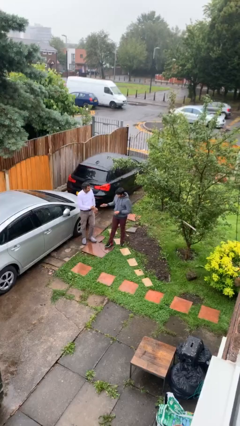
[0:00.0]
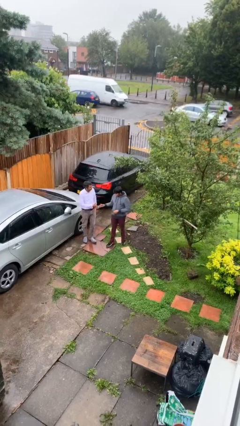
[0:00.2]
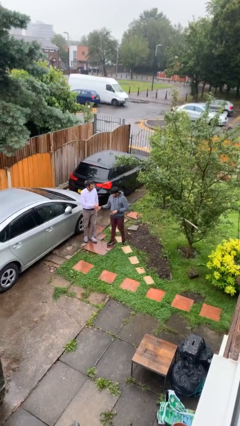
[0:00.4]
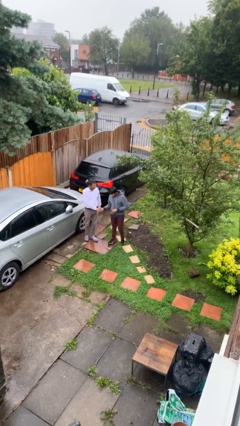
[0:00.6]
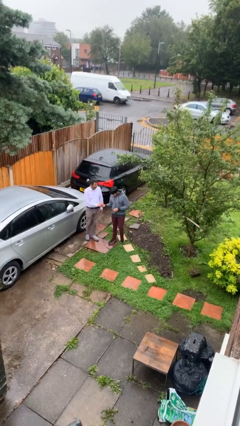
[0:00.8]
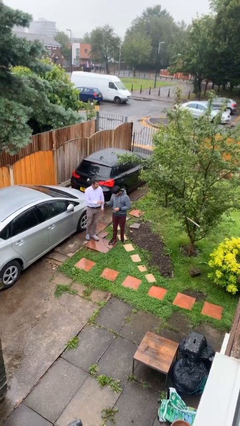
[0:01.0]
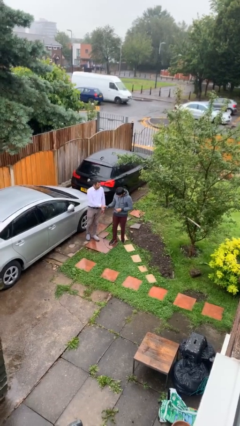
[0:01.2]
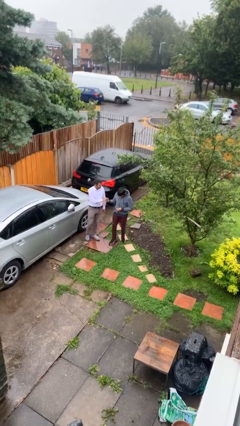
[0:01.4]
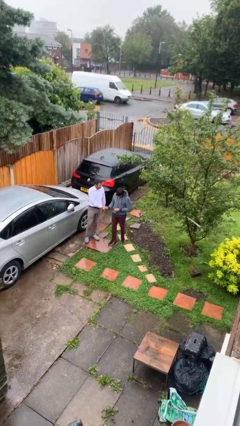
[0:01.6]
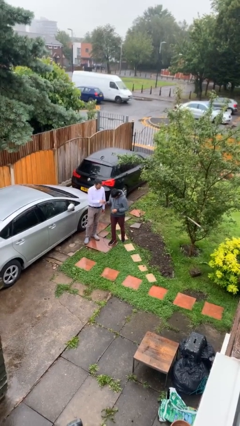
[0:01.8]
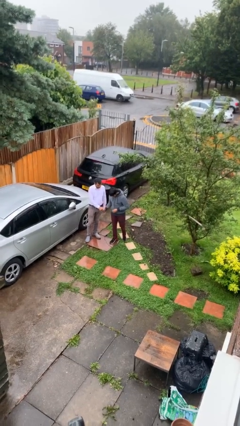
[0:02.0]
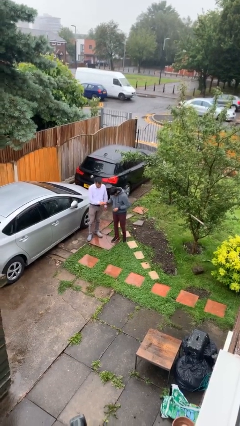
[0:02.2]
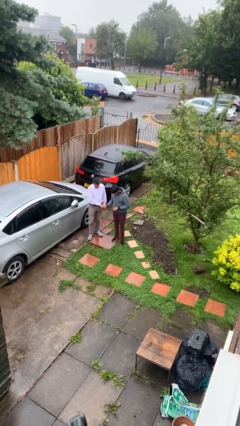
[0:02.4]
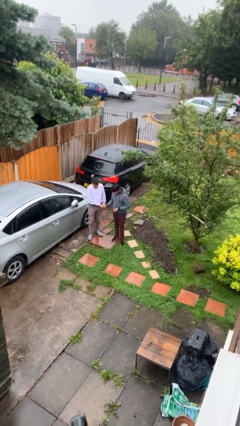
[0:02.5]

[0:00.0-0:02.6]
person shakes hand

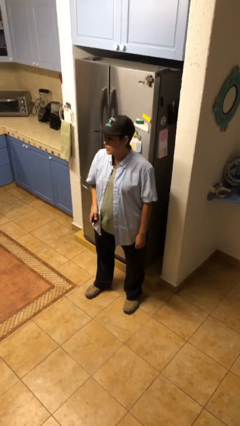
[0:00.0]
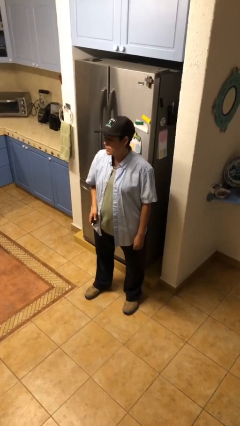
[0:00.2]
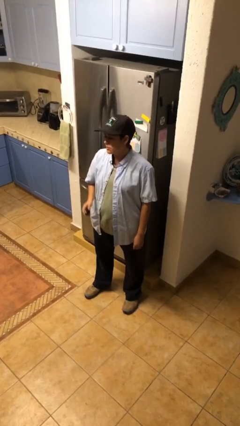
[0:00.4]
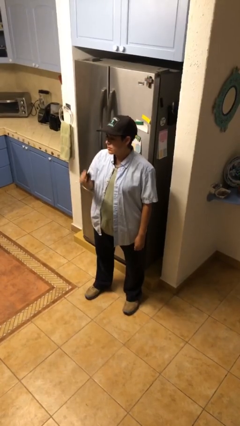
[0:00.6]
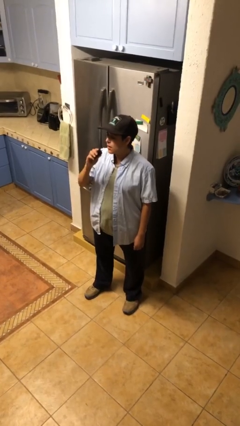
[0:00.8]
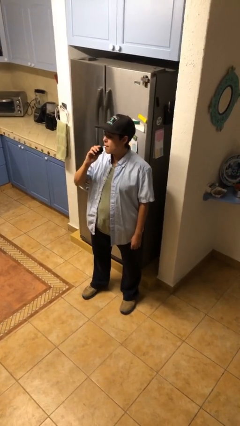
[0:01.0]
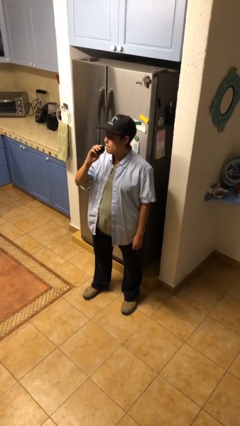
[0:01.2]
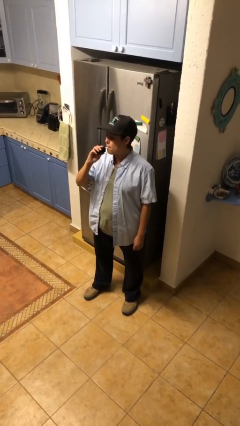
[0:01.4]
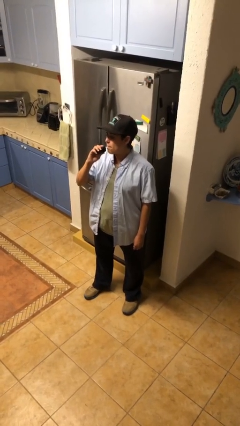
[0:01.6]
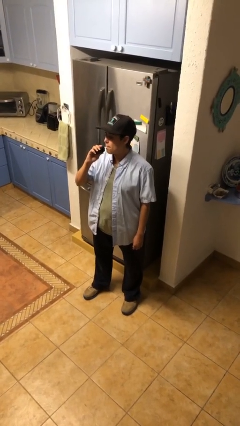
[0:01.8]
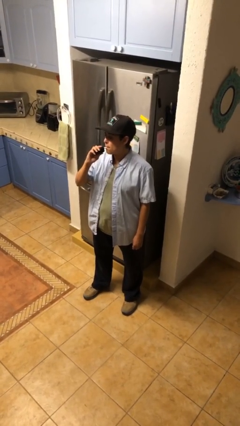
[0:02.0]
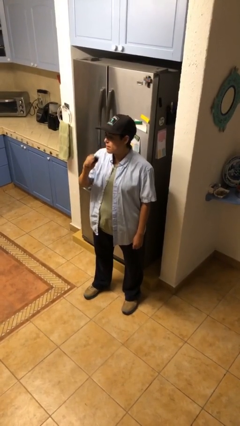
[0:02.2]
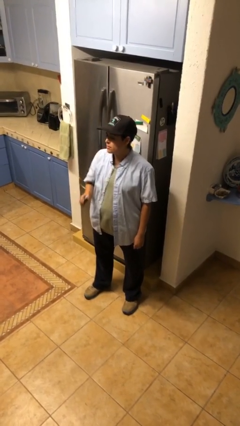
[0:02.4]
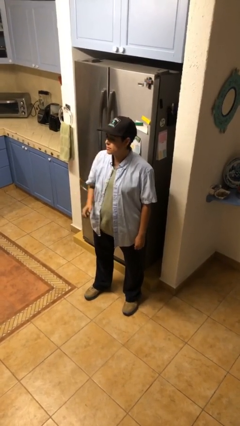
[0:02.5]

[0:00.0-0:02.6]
person vapes

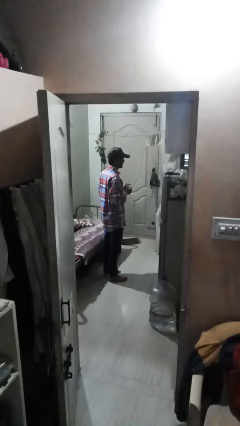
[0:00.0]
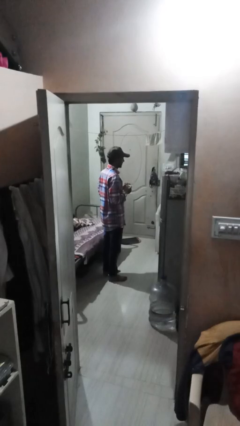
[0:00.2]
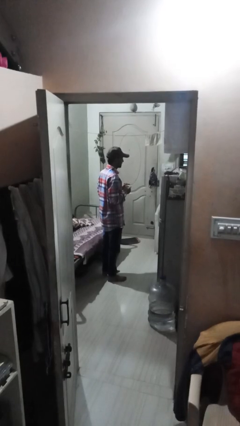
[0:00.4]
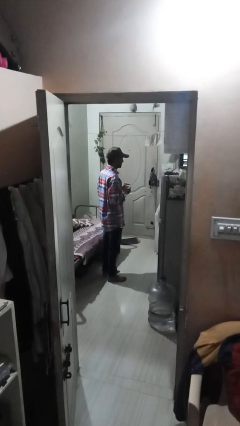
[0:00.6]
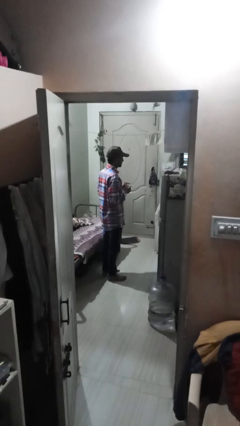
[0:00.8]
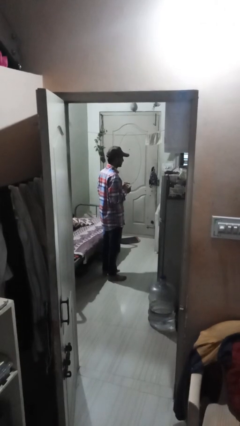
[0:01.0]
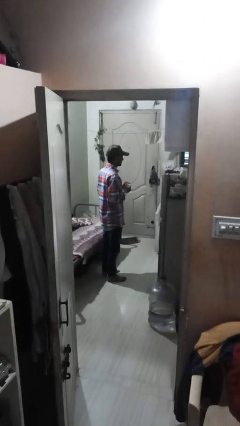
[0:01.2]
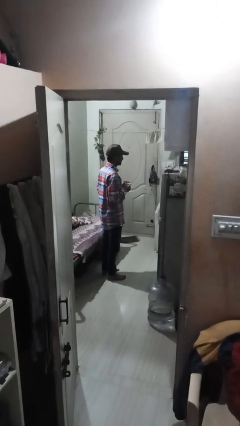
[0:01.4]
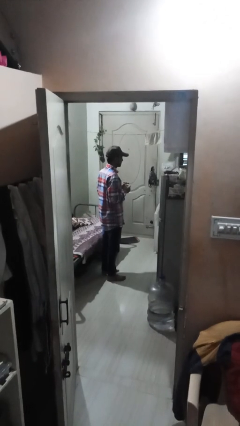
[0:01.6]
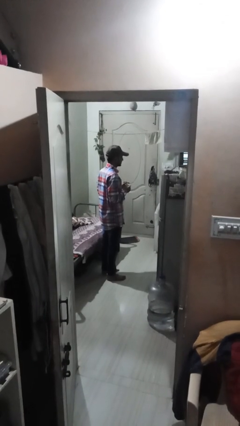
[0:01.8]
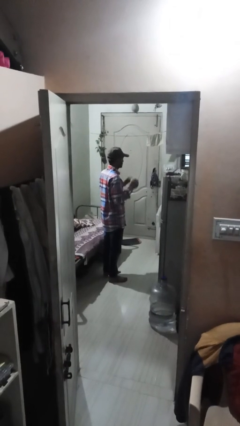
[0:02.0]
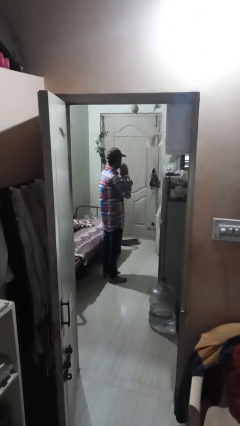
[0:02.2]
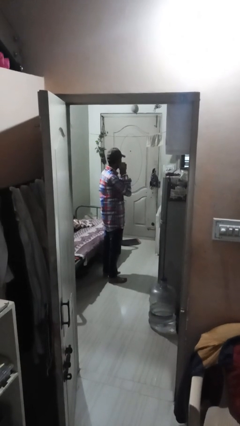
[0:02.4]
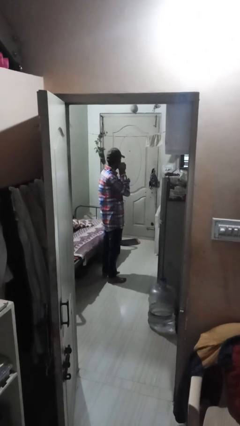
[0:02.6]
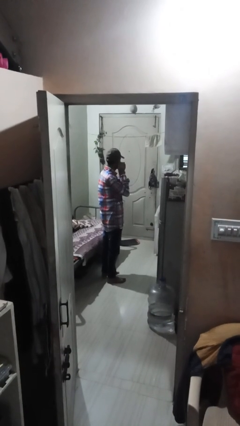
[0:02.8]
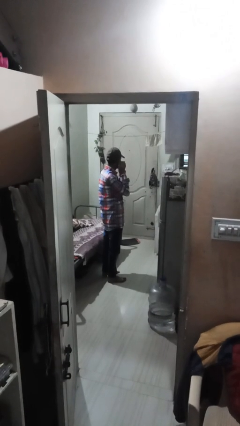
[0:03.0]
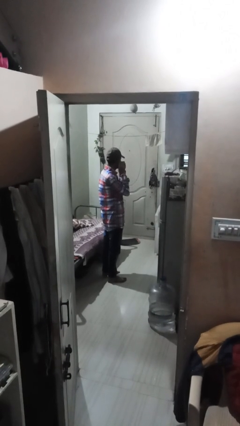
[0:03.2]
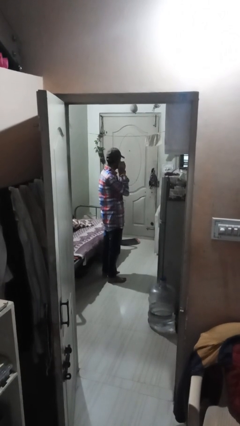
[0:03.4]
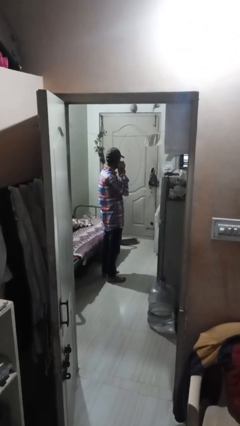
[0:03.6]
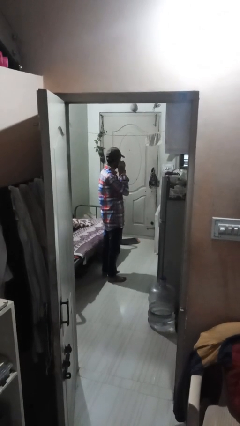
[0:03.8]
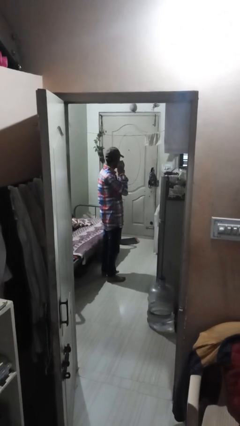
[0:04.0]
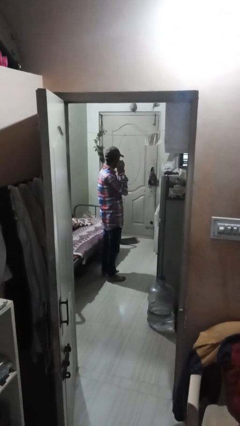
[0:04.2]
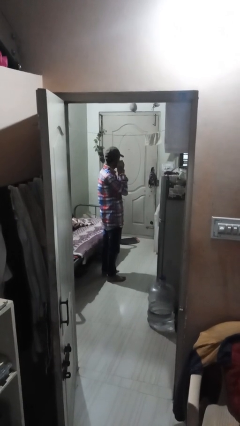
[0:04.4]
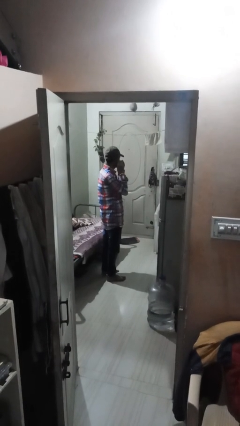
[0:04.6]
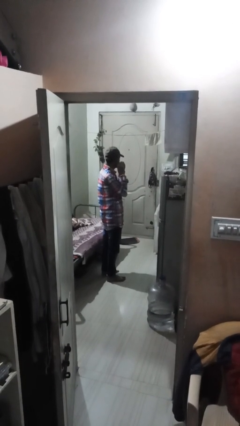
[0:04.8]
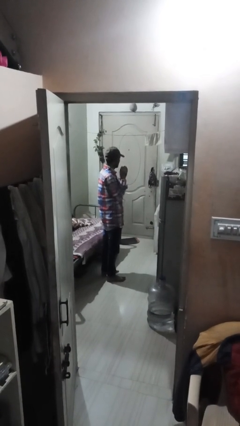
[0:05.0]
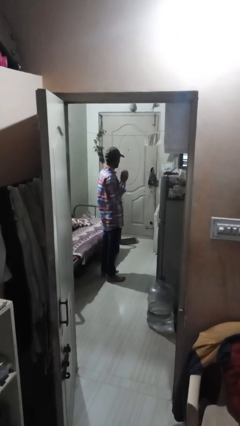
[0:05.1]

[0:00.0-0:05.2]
person puts on earrings

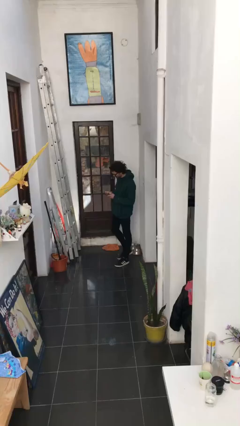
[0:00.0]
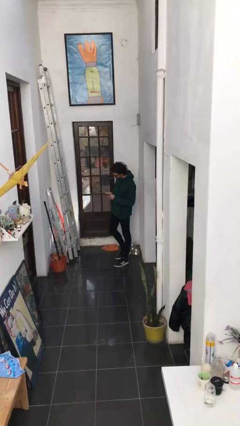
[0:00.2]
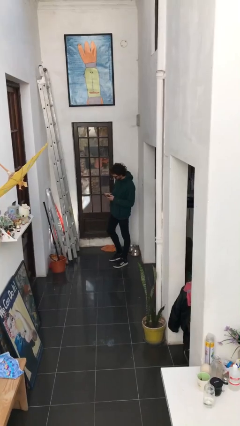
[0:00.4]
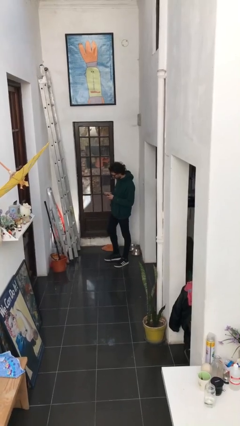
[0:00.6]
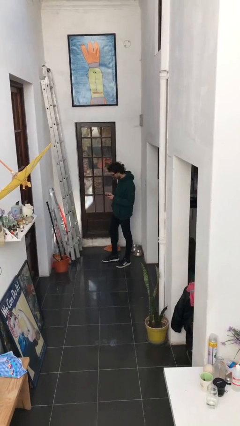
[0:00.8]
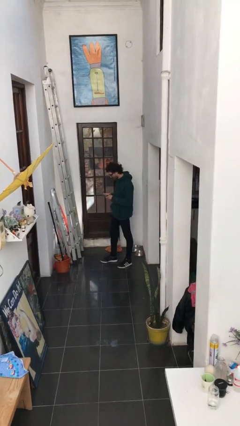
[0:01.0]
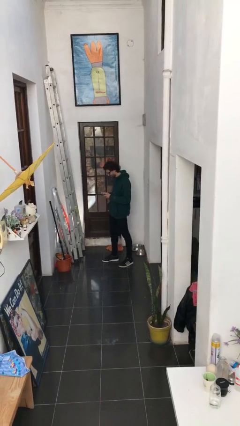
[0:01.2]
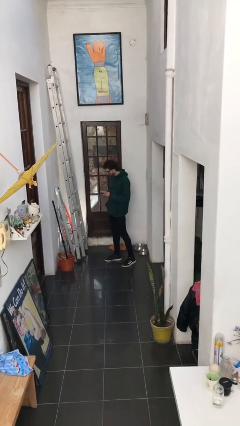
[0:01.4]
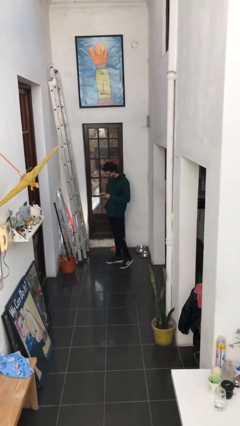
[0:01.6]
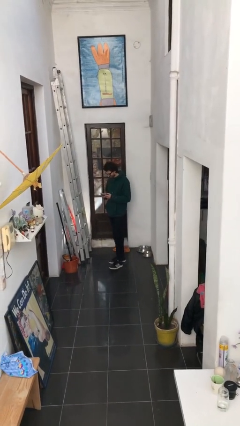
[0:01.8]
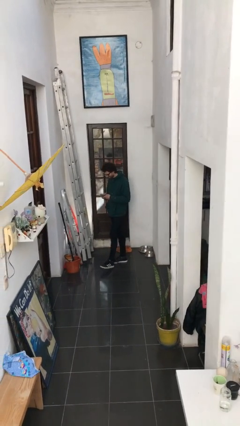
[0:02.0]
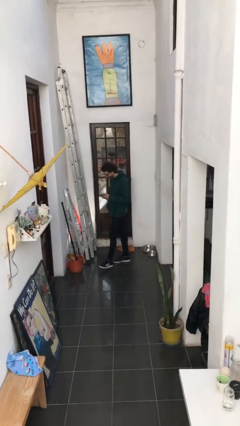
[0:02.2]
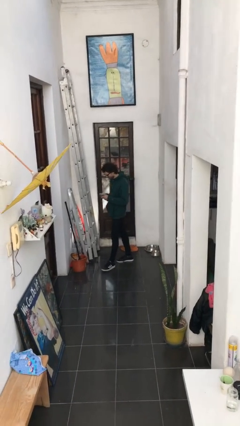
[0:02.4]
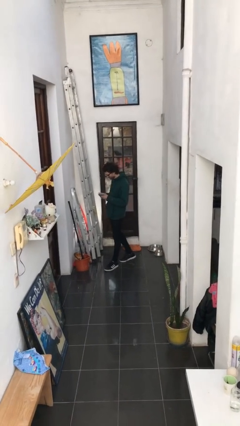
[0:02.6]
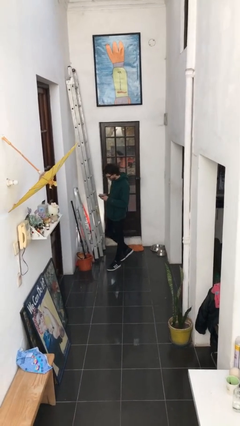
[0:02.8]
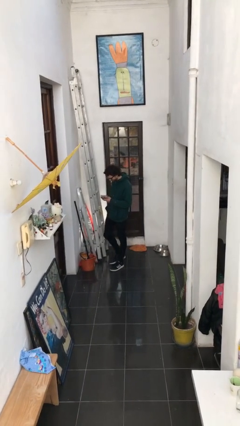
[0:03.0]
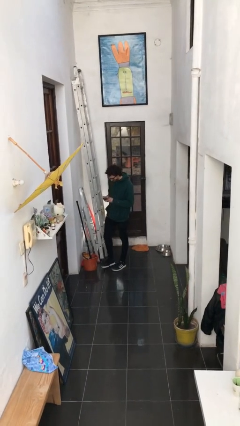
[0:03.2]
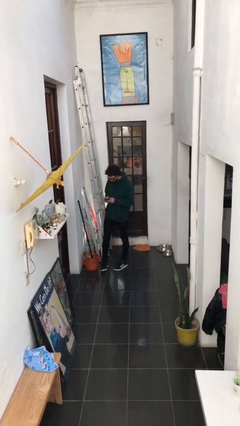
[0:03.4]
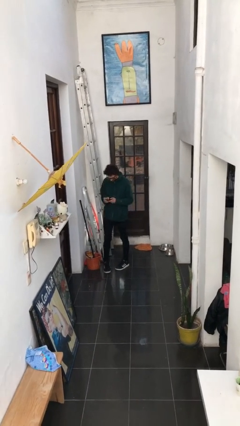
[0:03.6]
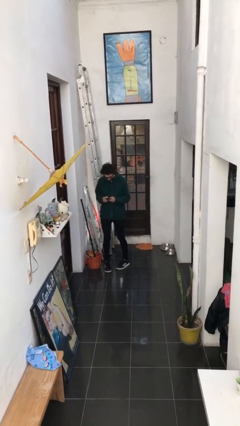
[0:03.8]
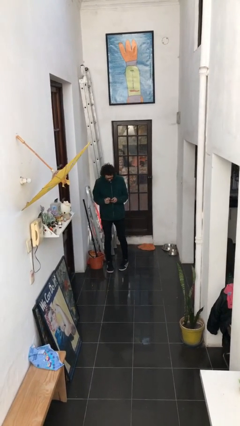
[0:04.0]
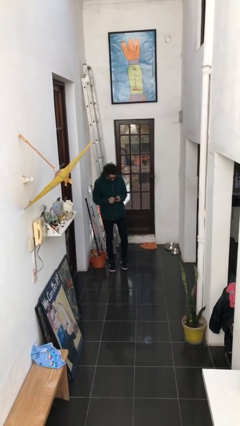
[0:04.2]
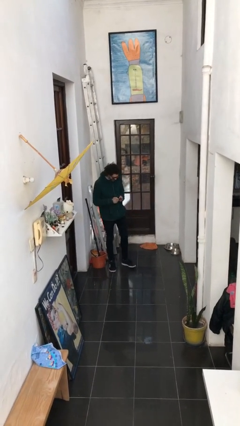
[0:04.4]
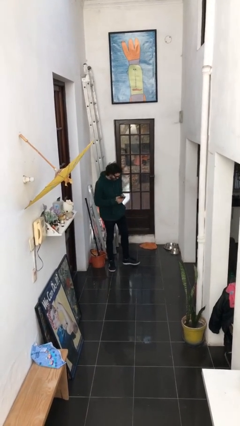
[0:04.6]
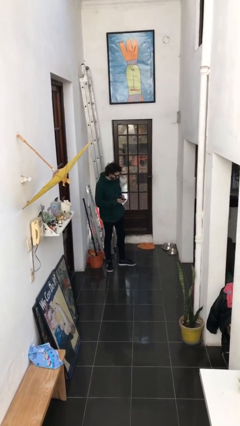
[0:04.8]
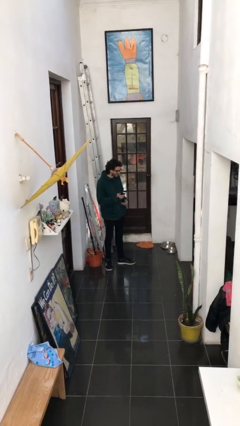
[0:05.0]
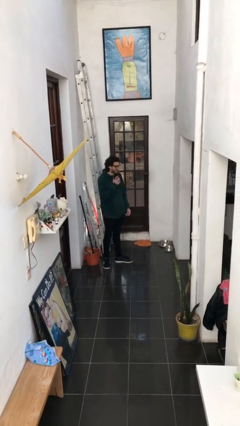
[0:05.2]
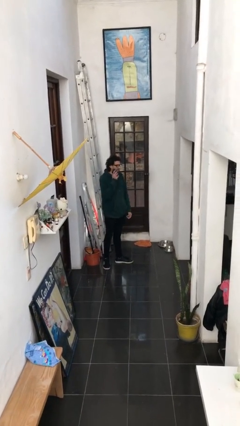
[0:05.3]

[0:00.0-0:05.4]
person texts on phone

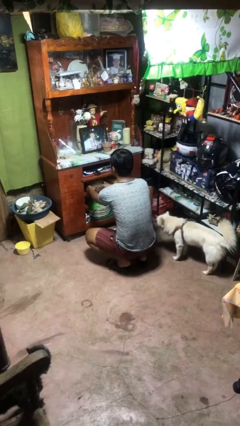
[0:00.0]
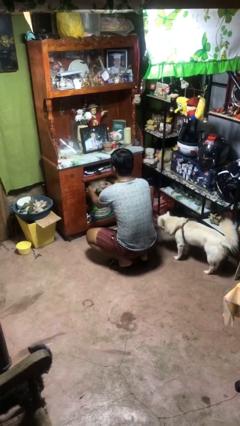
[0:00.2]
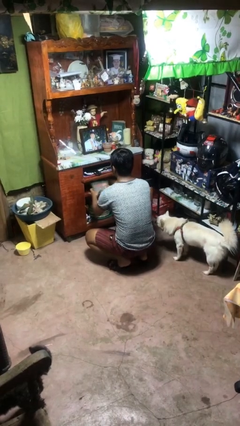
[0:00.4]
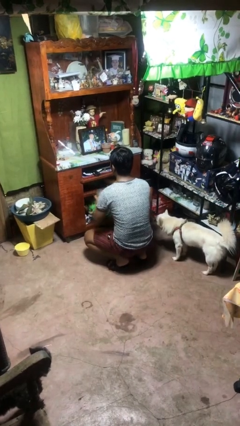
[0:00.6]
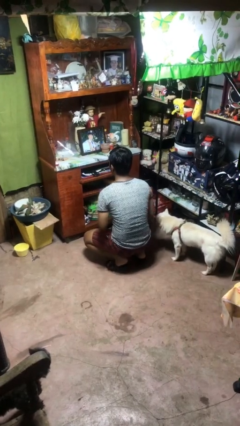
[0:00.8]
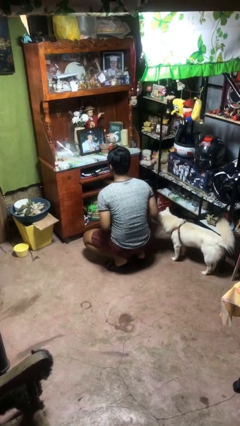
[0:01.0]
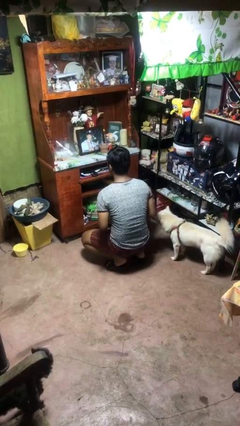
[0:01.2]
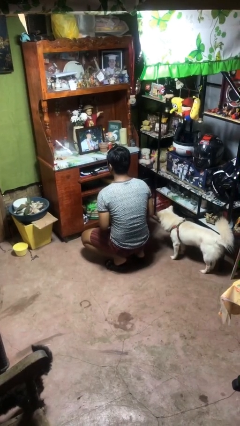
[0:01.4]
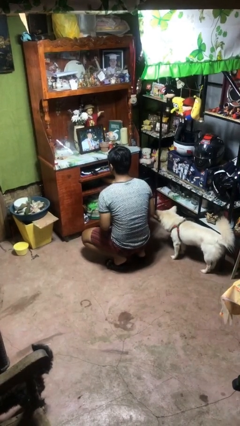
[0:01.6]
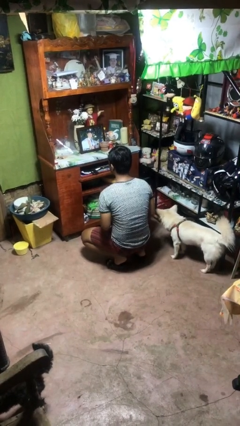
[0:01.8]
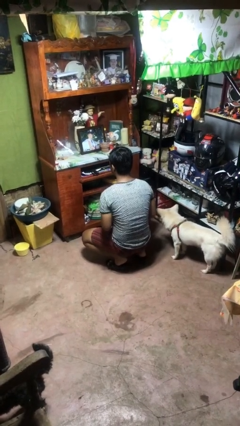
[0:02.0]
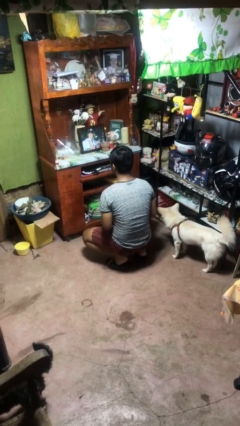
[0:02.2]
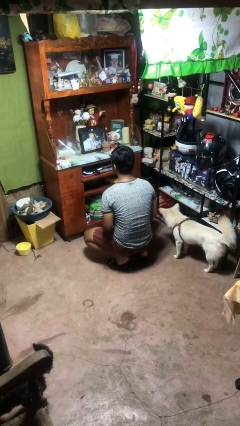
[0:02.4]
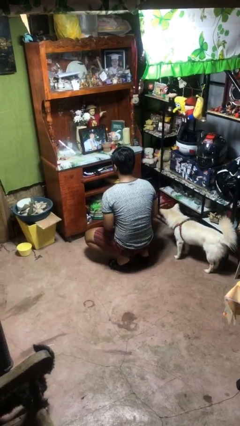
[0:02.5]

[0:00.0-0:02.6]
person picks up object from cabinet
